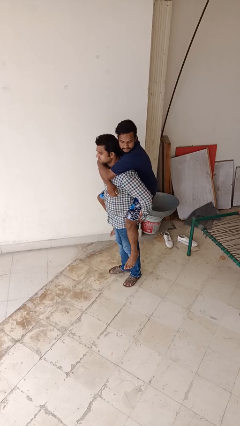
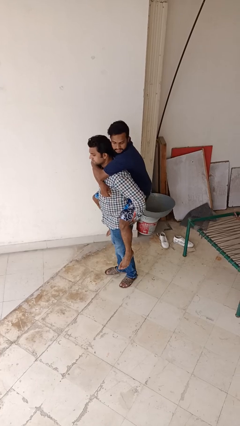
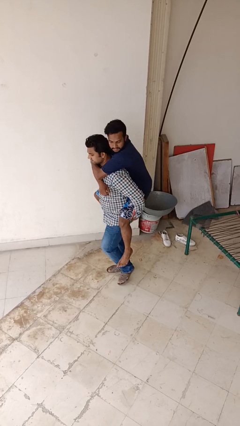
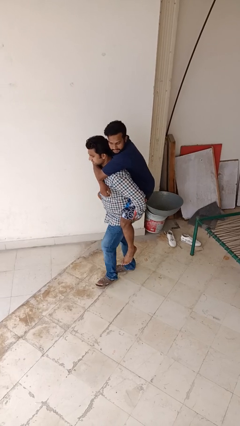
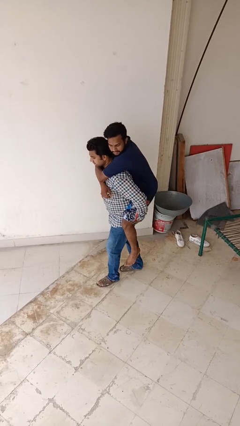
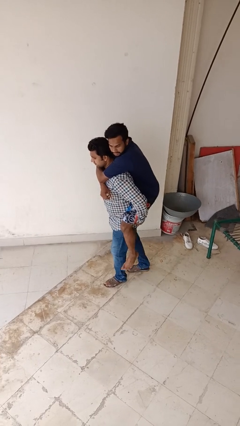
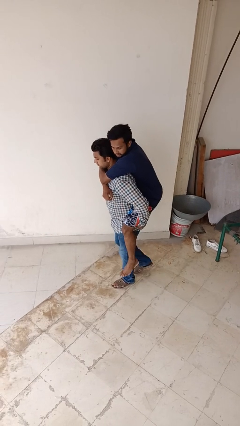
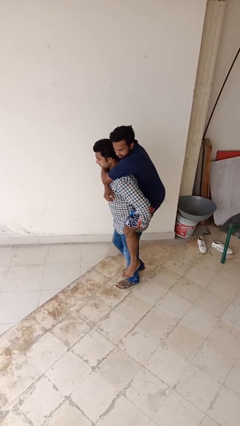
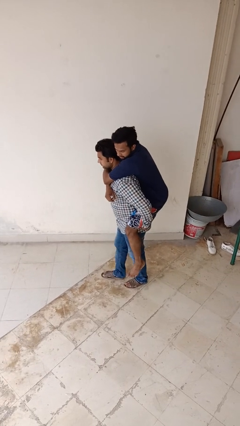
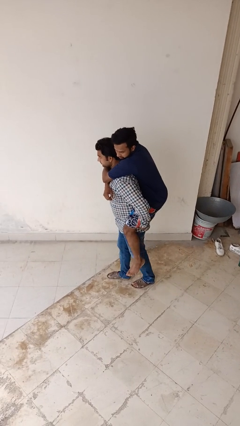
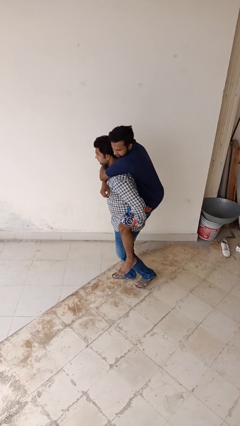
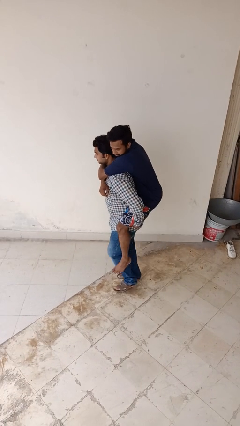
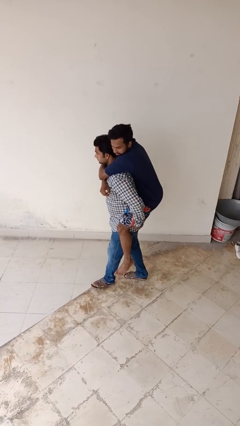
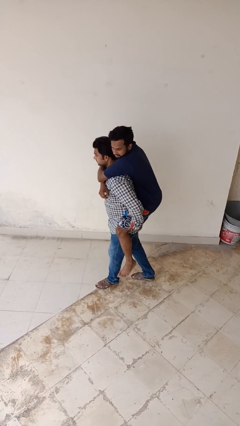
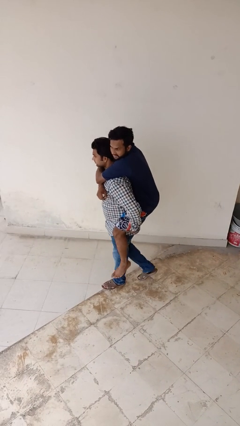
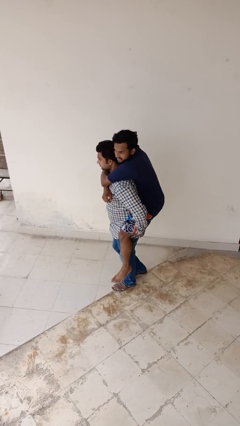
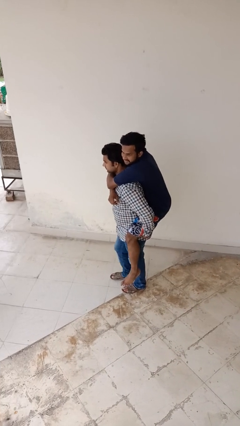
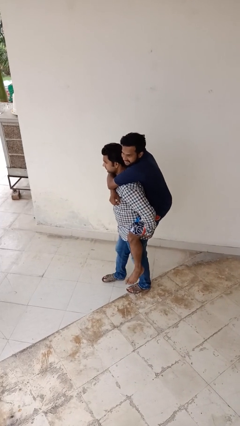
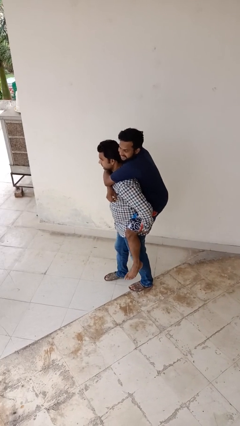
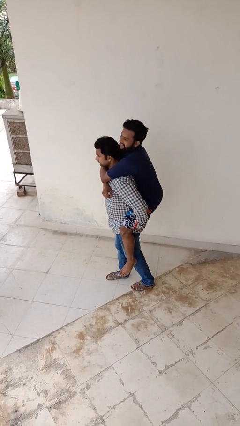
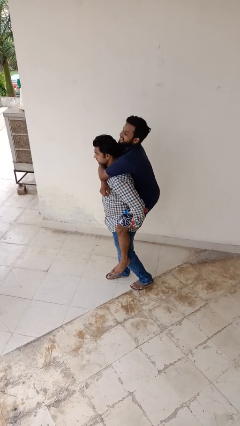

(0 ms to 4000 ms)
person carries person on back

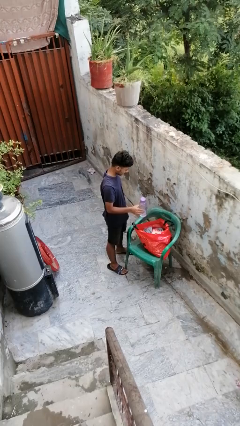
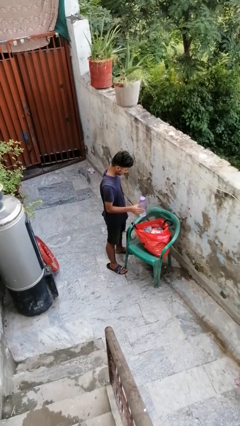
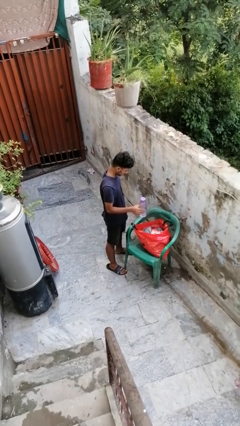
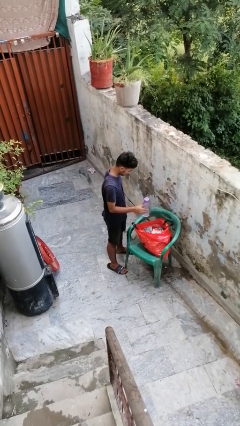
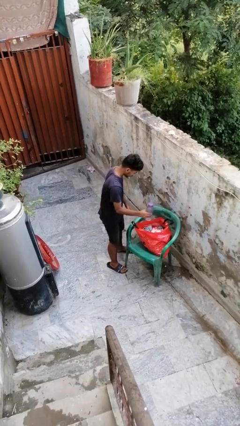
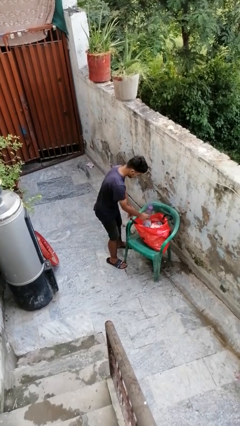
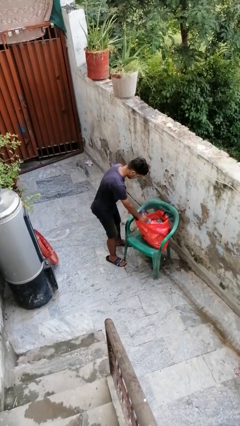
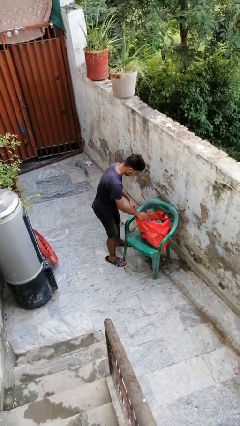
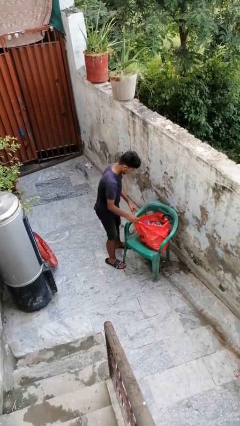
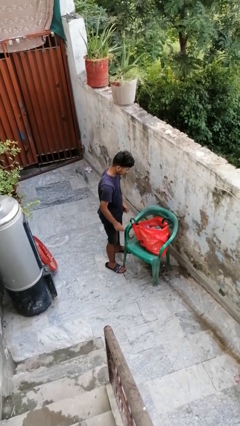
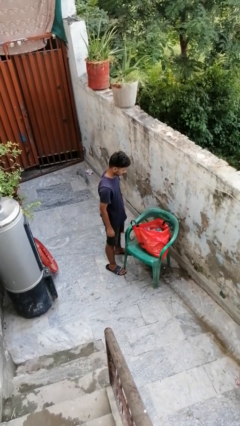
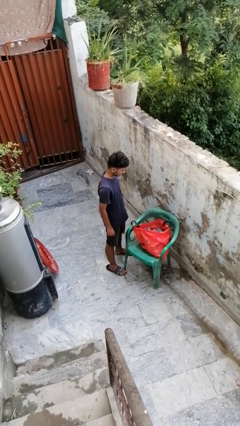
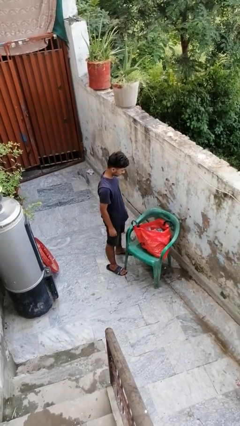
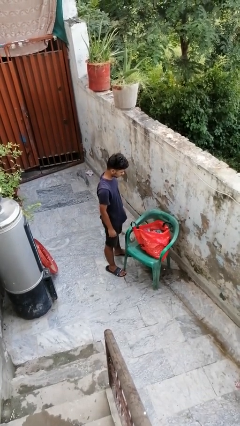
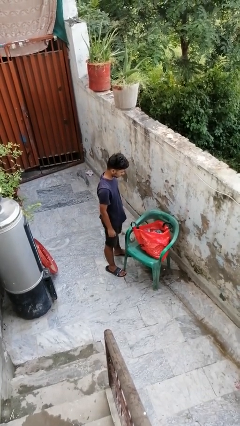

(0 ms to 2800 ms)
person puts object into bag

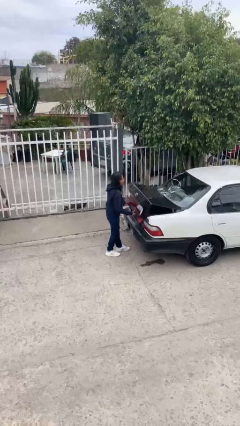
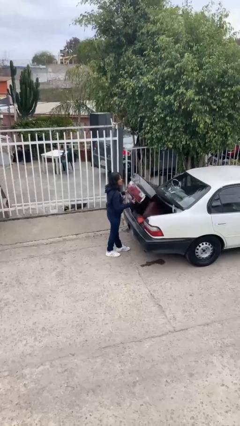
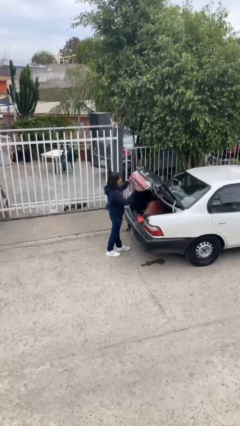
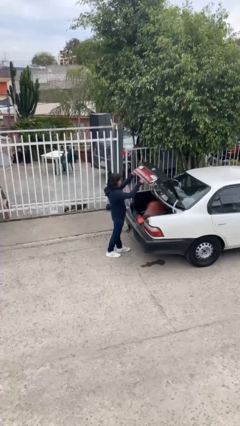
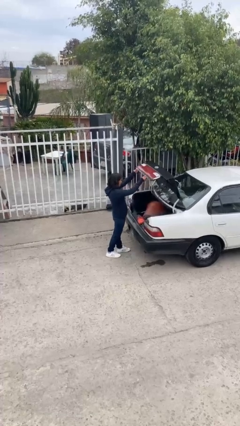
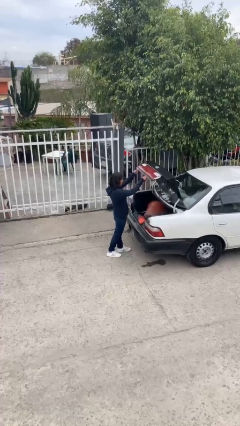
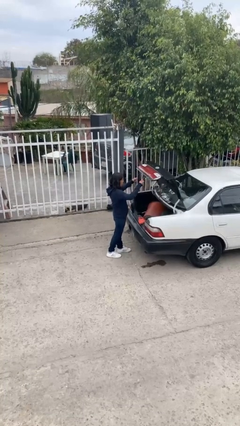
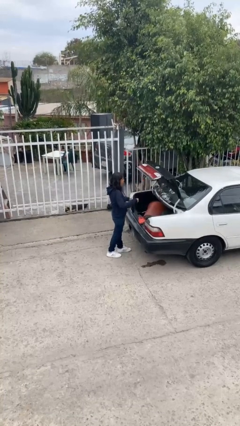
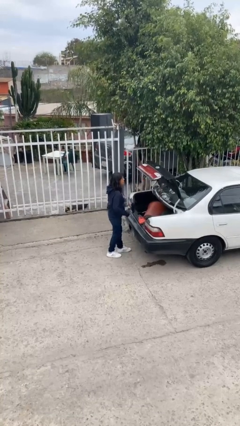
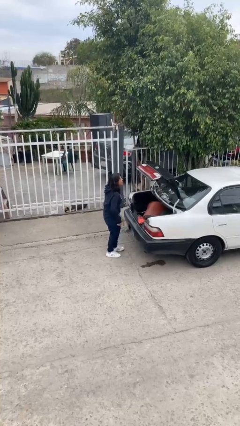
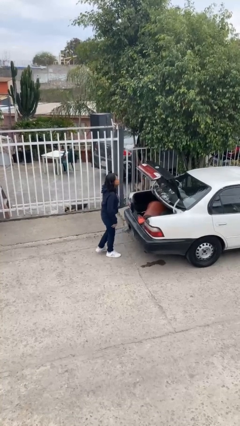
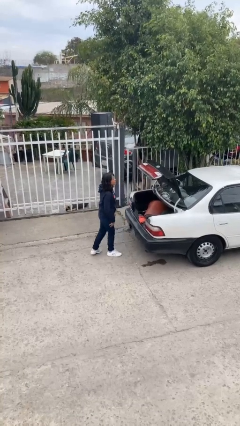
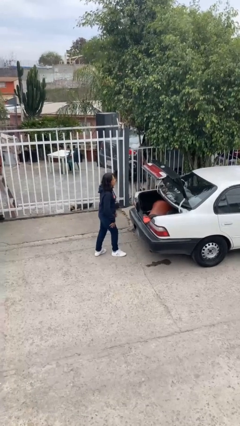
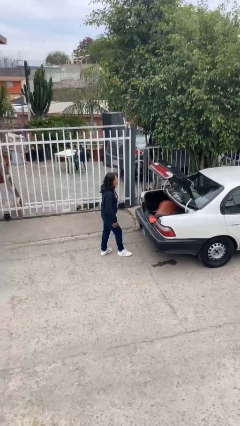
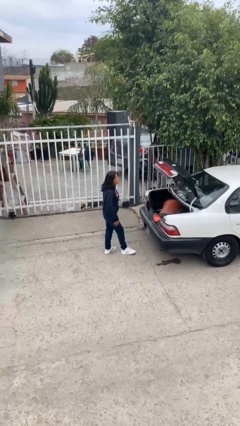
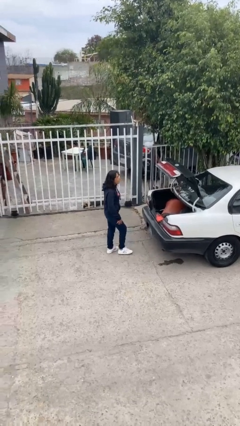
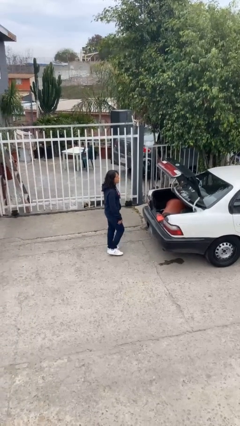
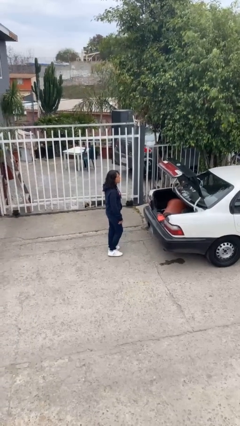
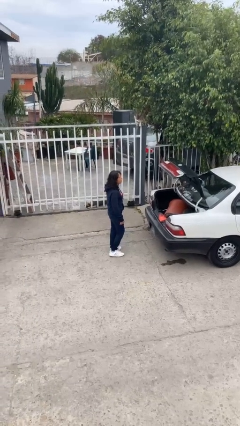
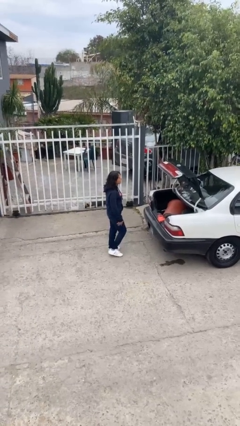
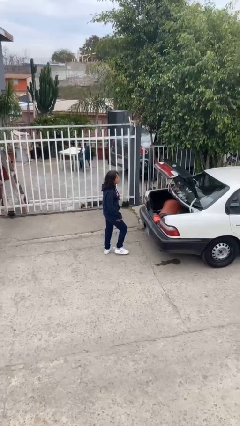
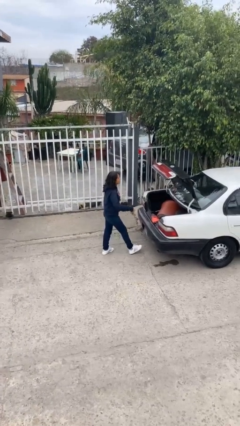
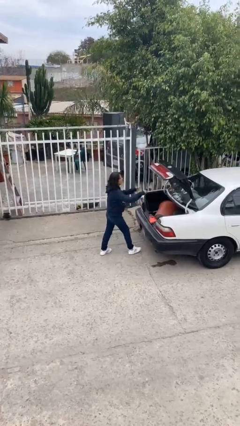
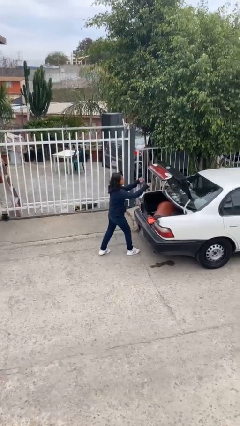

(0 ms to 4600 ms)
person opens car trunk

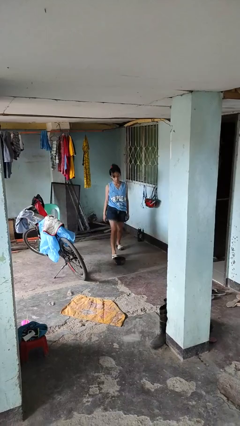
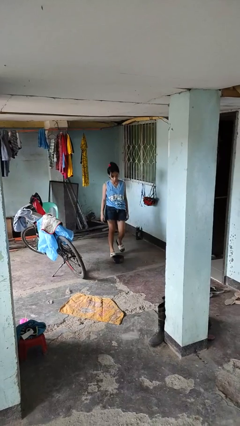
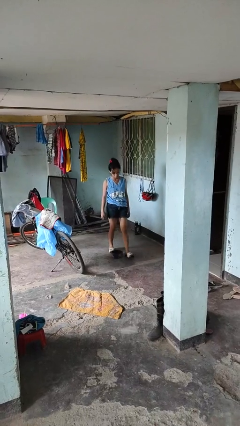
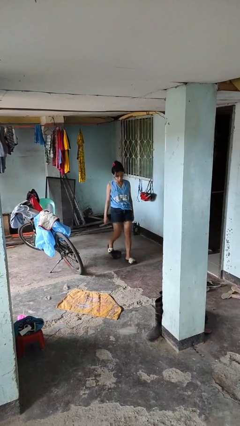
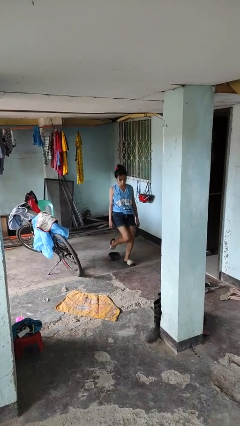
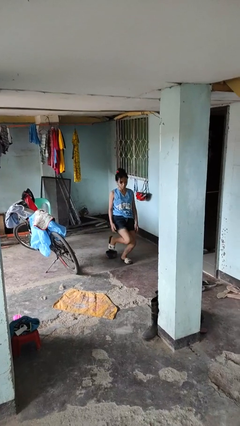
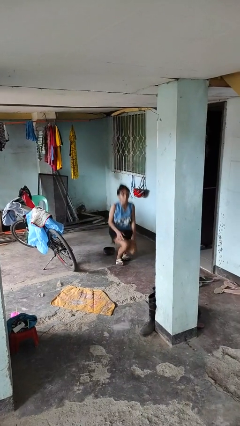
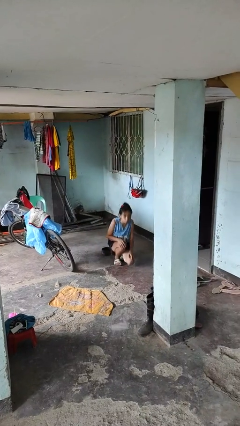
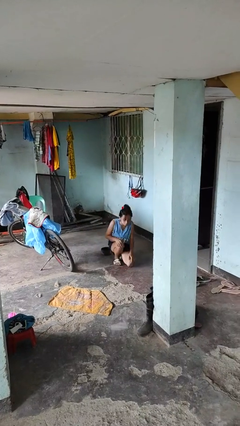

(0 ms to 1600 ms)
person trips on object on floor

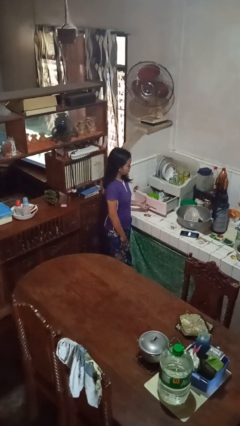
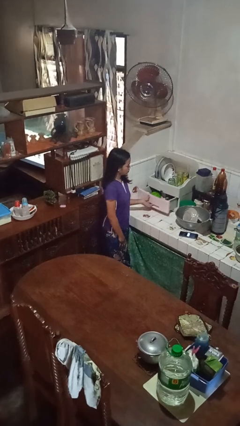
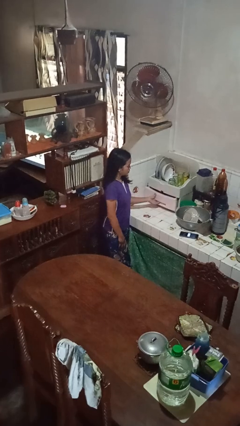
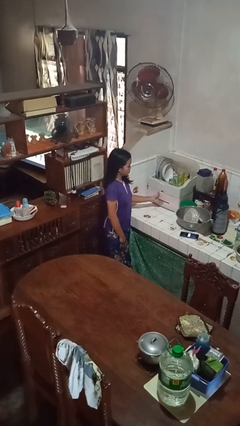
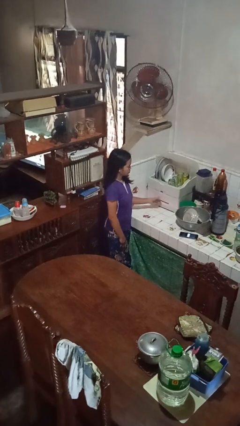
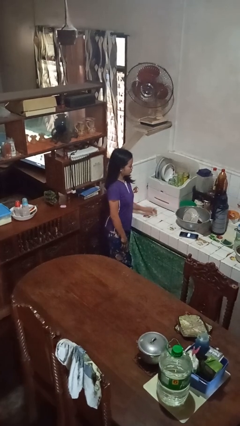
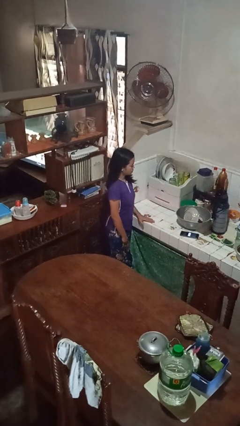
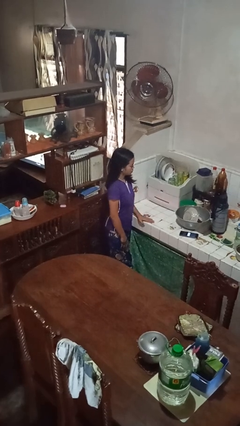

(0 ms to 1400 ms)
person closes kitchen drawer

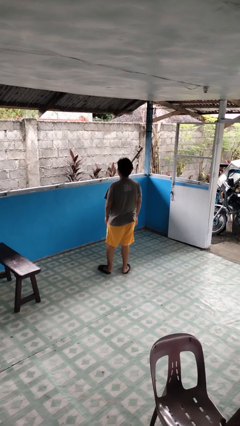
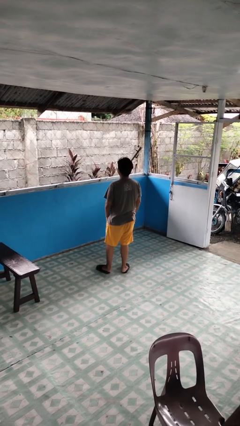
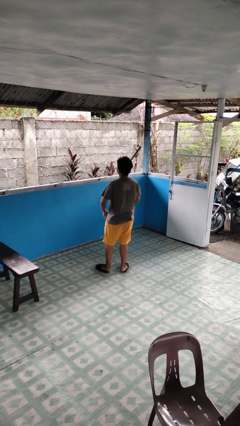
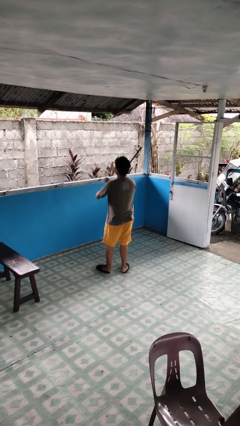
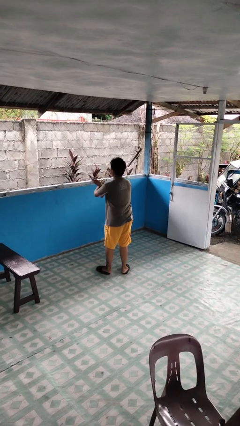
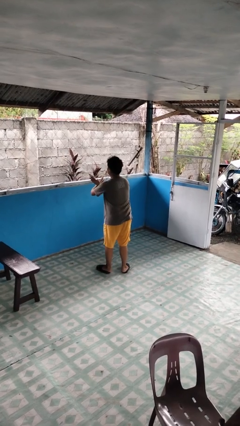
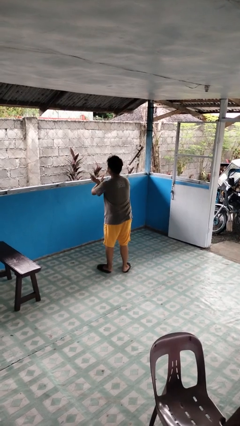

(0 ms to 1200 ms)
person gestures arms x

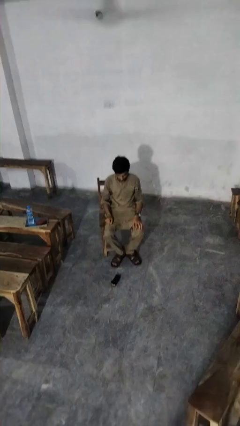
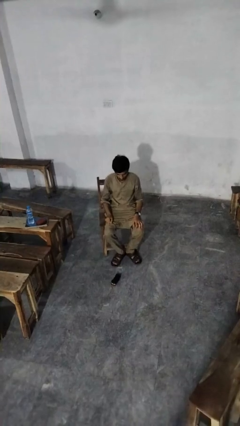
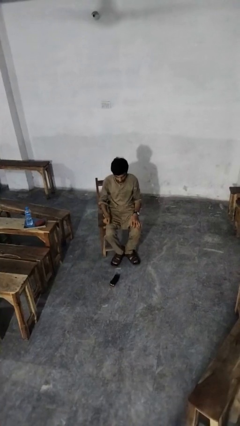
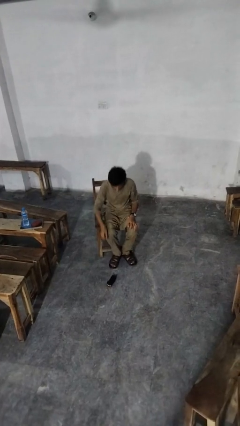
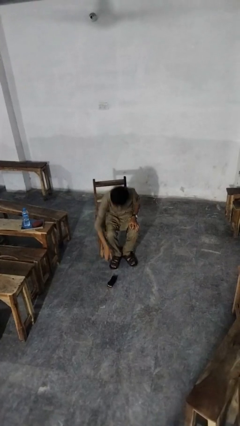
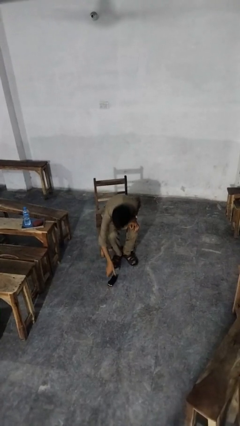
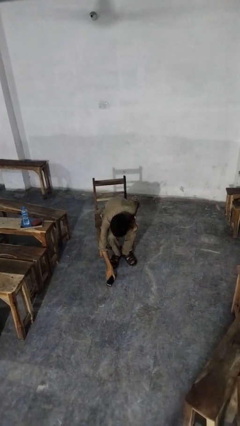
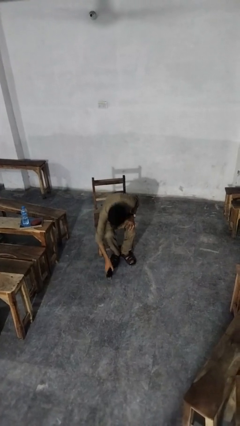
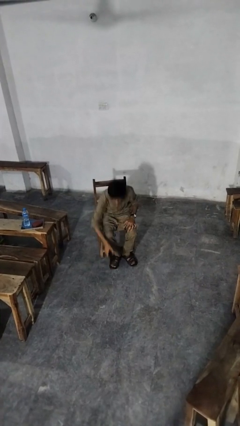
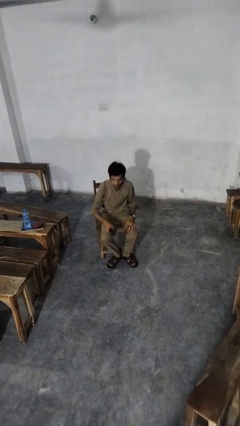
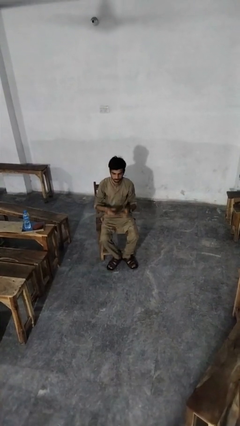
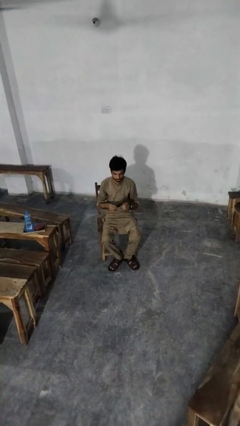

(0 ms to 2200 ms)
person picks up object from floor
